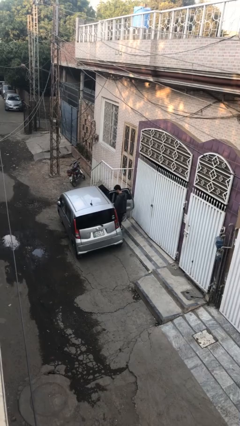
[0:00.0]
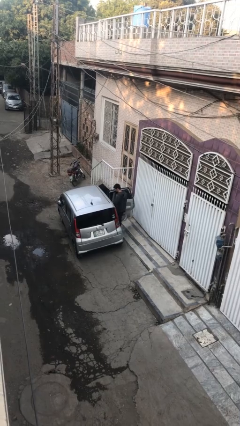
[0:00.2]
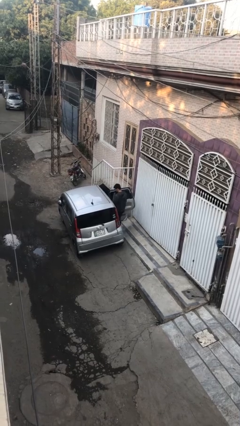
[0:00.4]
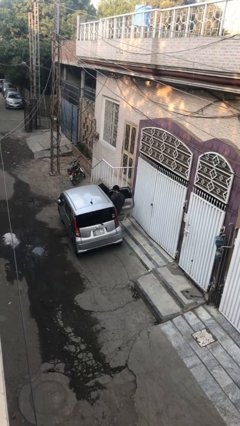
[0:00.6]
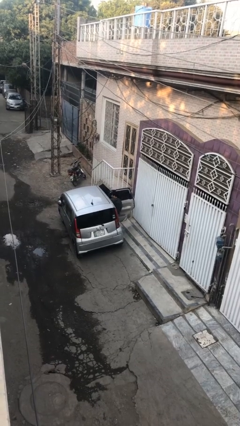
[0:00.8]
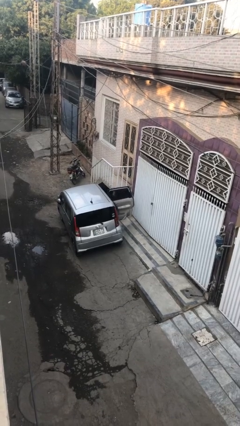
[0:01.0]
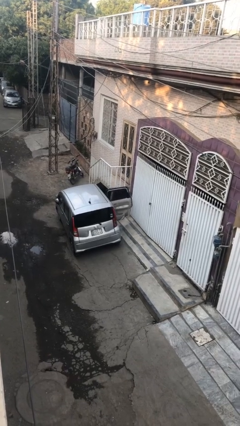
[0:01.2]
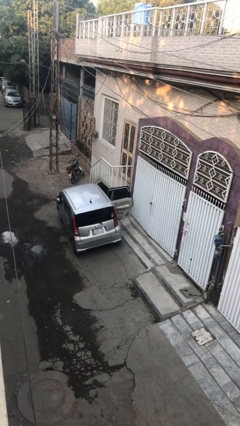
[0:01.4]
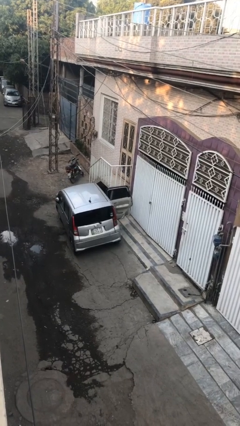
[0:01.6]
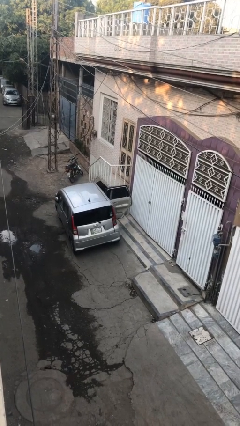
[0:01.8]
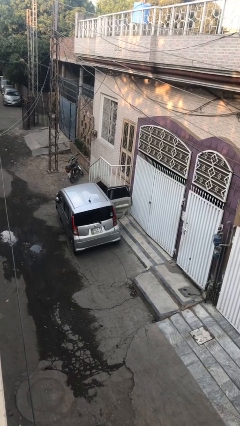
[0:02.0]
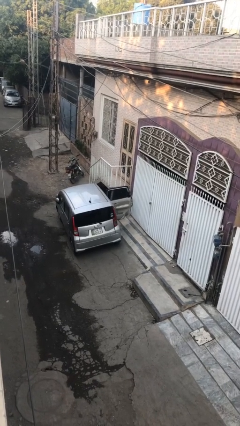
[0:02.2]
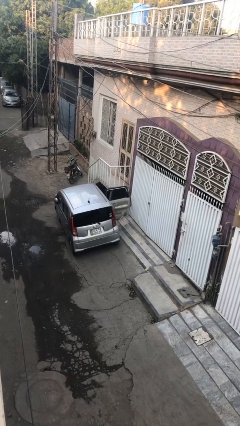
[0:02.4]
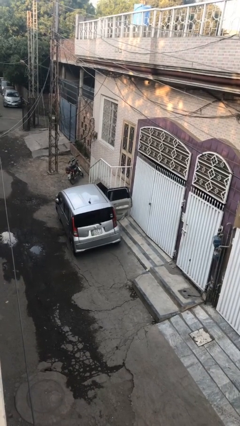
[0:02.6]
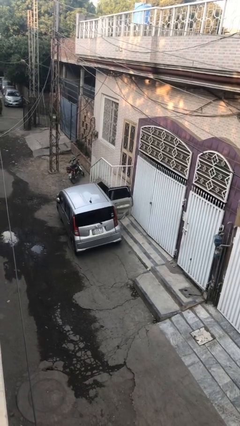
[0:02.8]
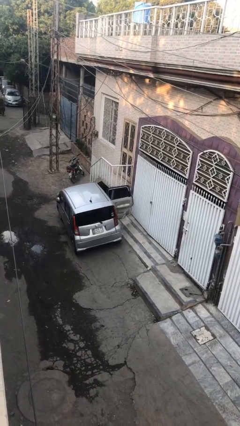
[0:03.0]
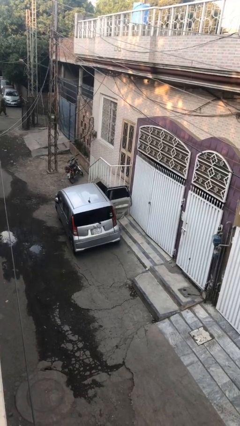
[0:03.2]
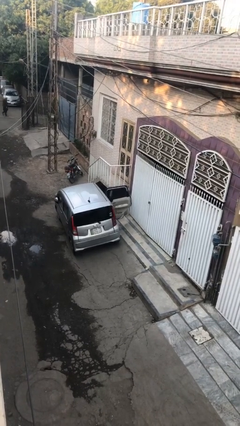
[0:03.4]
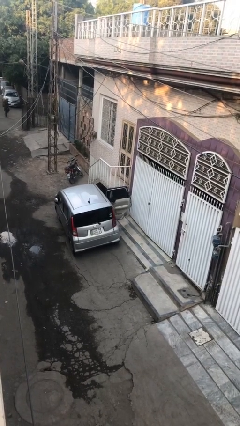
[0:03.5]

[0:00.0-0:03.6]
person enters car

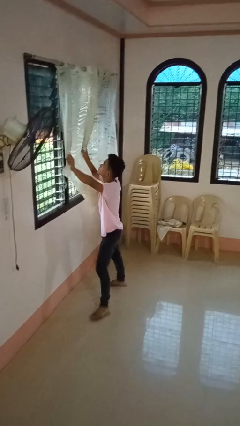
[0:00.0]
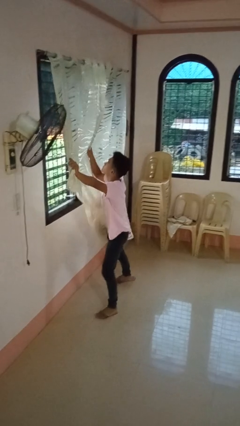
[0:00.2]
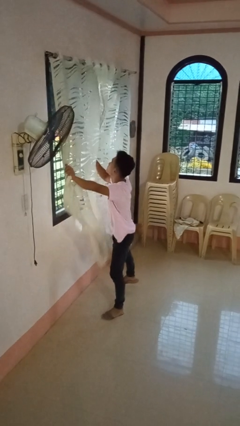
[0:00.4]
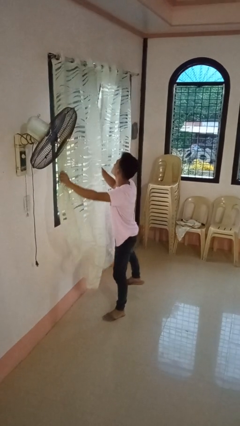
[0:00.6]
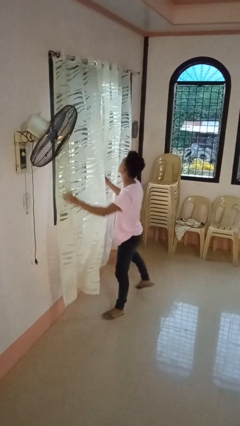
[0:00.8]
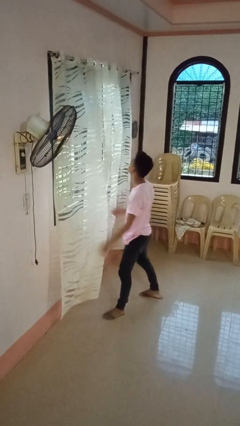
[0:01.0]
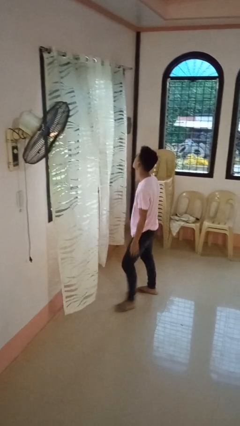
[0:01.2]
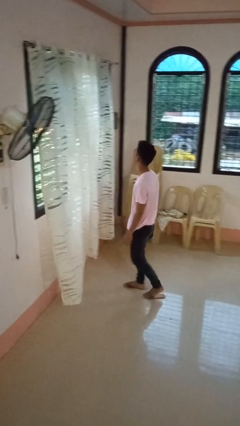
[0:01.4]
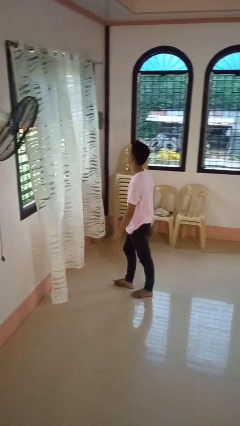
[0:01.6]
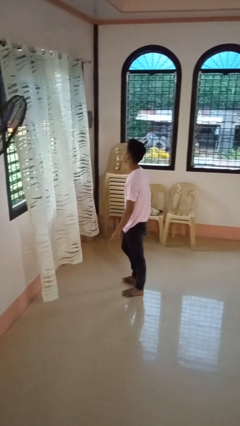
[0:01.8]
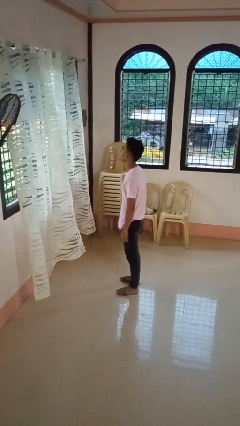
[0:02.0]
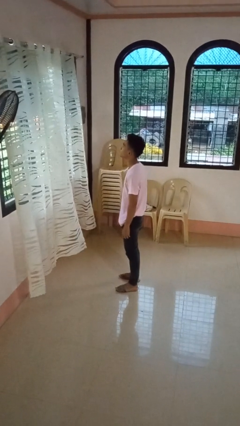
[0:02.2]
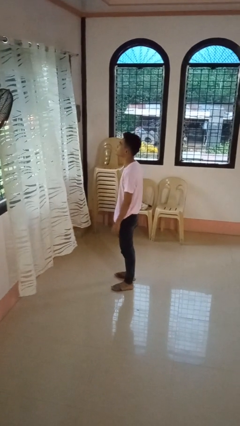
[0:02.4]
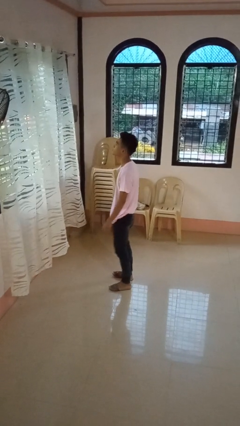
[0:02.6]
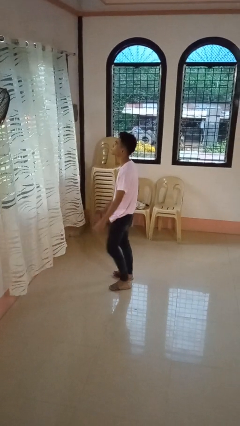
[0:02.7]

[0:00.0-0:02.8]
person closes curtains

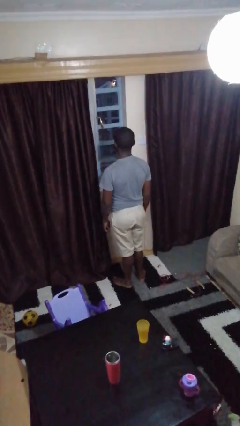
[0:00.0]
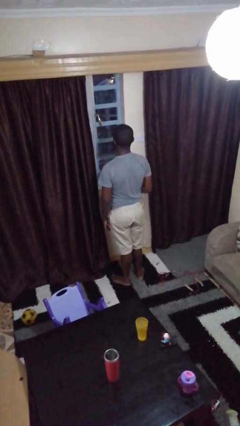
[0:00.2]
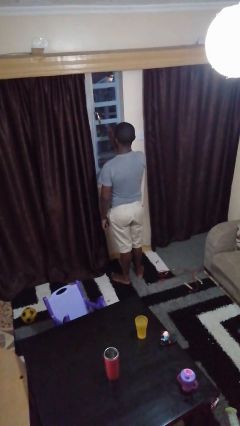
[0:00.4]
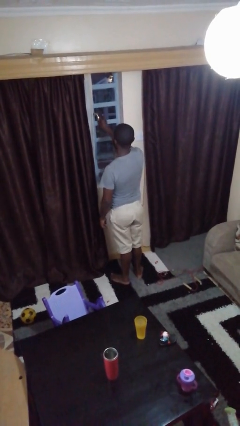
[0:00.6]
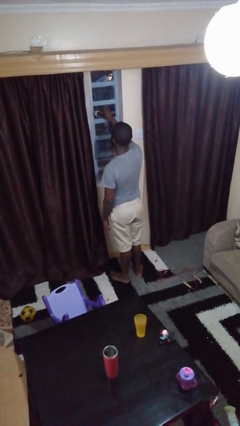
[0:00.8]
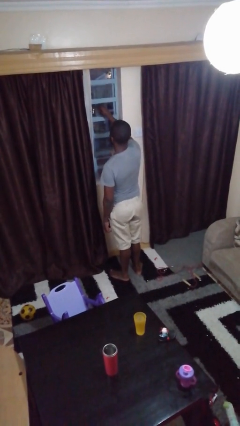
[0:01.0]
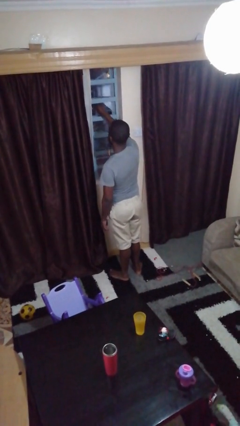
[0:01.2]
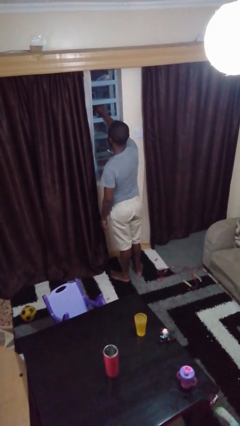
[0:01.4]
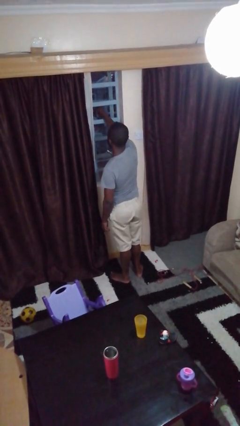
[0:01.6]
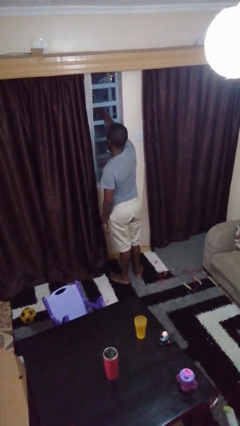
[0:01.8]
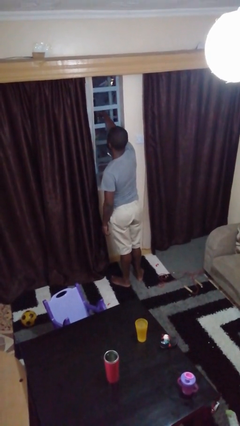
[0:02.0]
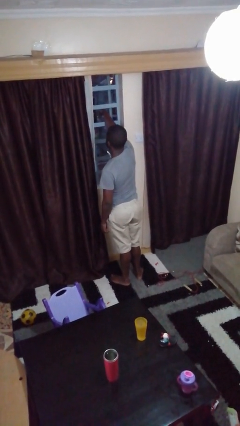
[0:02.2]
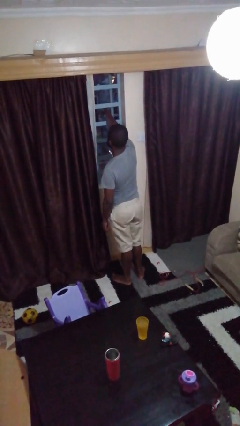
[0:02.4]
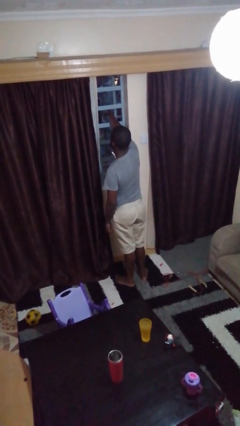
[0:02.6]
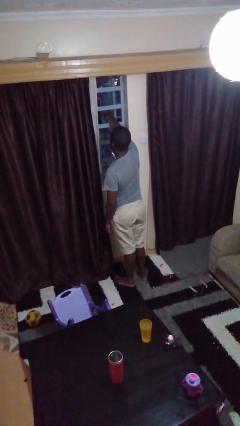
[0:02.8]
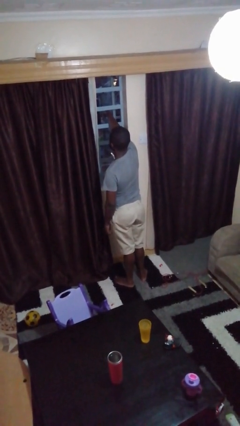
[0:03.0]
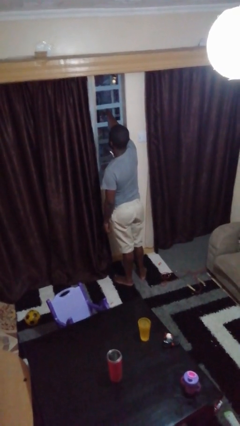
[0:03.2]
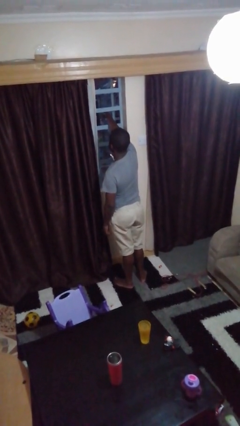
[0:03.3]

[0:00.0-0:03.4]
person opens home window

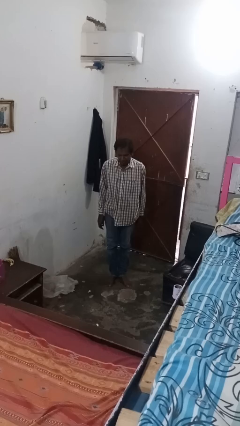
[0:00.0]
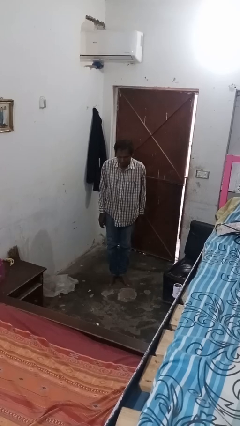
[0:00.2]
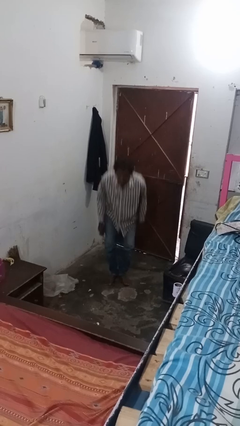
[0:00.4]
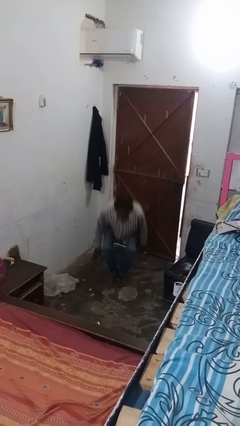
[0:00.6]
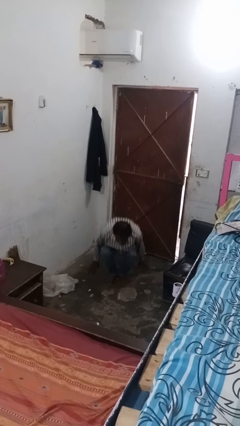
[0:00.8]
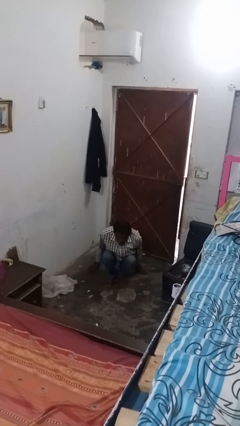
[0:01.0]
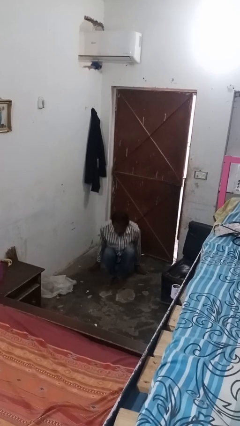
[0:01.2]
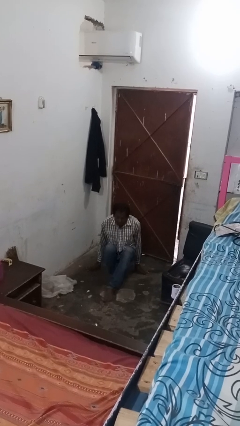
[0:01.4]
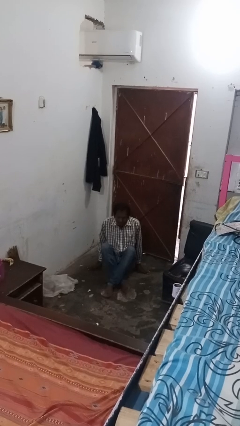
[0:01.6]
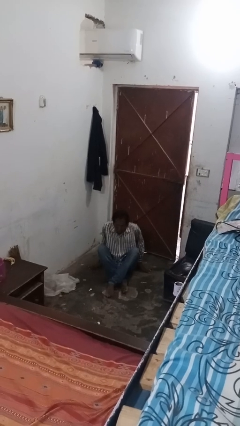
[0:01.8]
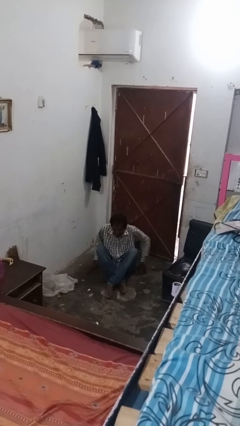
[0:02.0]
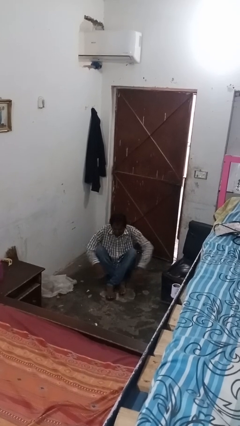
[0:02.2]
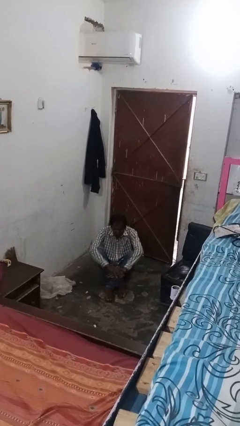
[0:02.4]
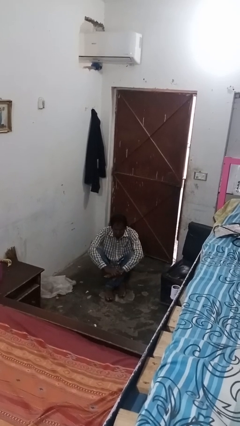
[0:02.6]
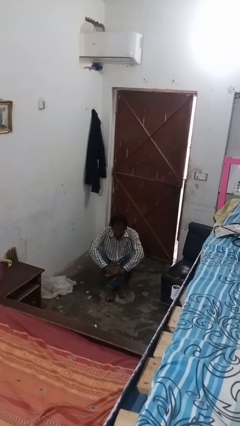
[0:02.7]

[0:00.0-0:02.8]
person sits crisscross

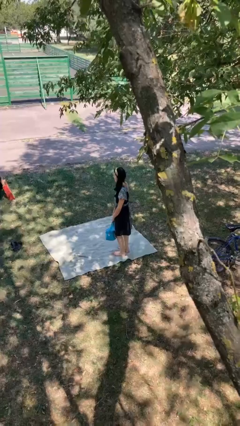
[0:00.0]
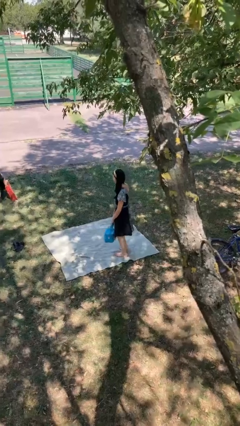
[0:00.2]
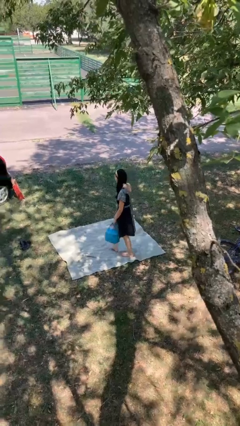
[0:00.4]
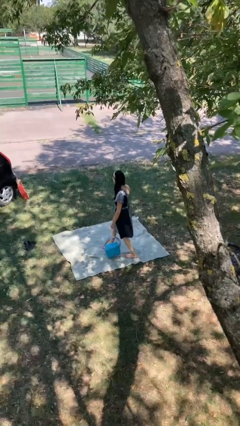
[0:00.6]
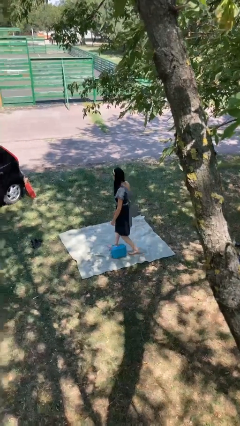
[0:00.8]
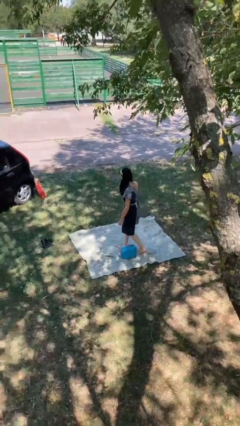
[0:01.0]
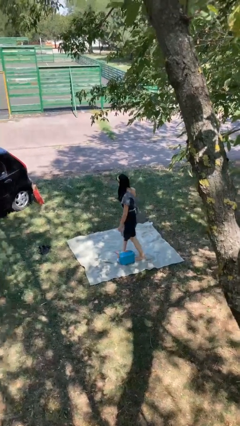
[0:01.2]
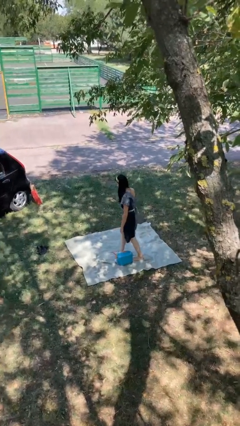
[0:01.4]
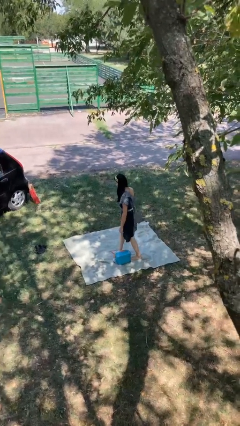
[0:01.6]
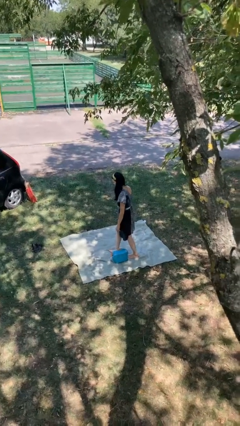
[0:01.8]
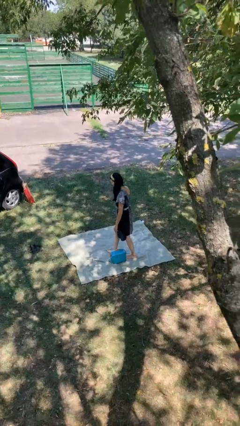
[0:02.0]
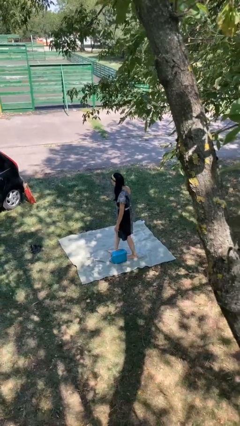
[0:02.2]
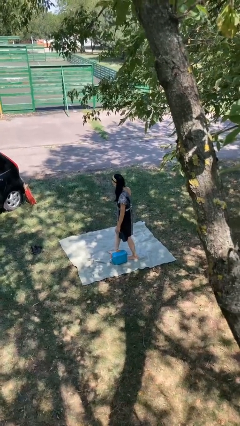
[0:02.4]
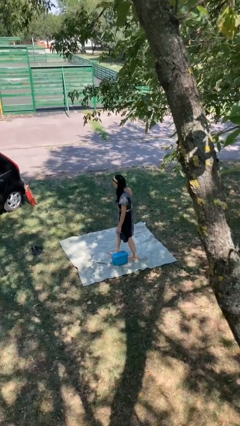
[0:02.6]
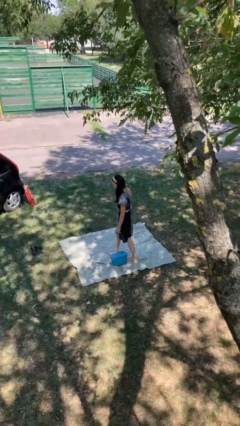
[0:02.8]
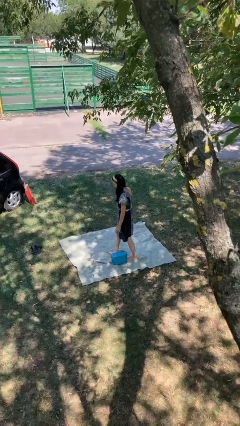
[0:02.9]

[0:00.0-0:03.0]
person drops object

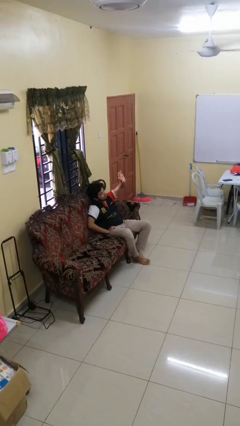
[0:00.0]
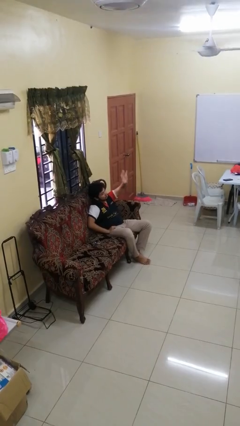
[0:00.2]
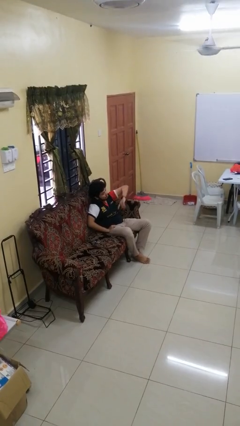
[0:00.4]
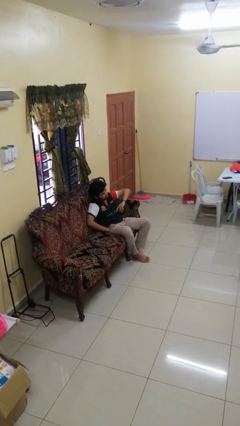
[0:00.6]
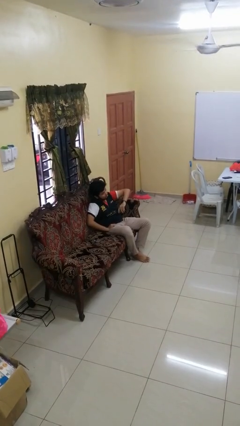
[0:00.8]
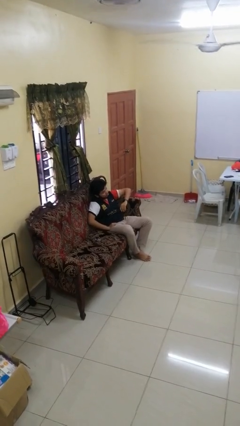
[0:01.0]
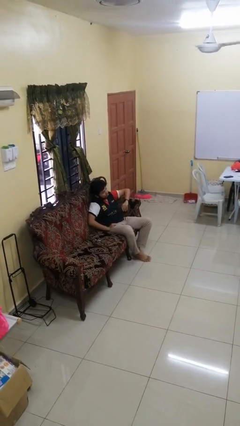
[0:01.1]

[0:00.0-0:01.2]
person gestures swipe down

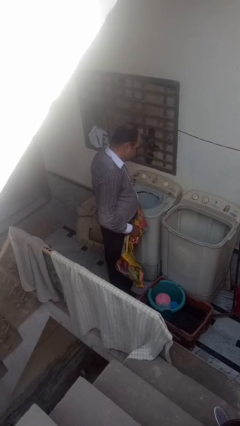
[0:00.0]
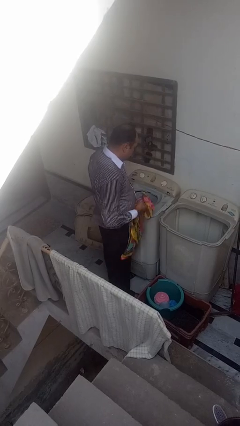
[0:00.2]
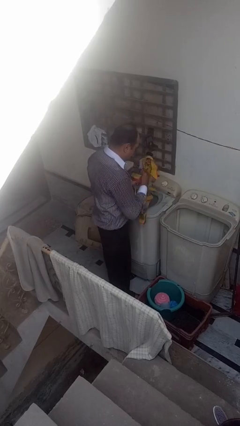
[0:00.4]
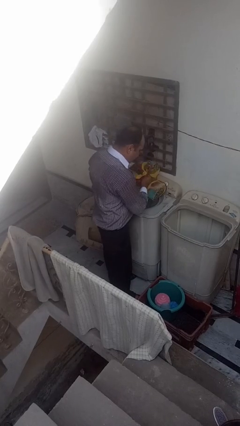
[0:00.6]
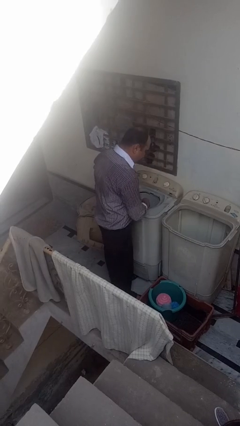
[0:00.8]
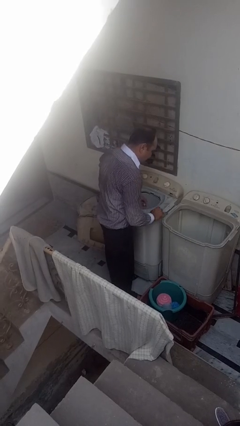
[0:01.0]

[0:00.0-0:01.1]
person loads dryer
